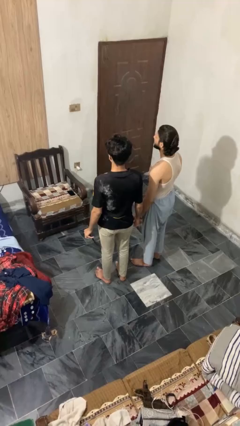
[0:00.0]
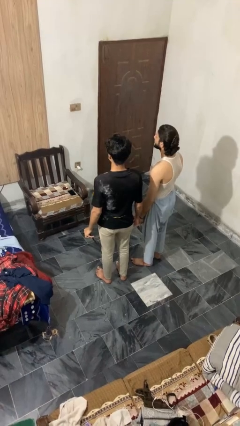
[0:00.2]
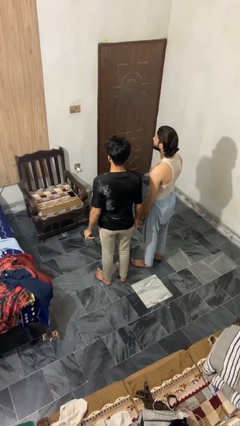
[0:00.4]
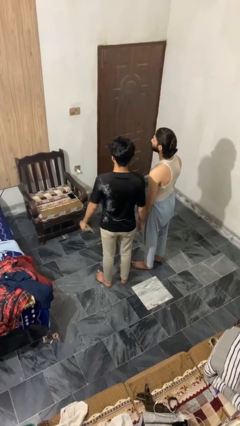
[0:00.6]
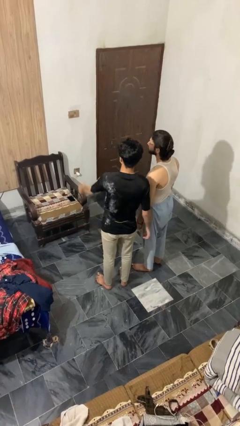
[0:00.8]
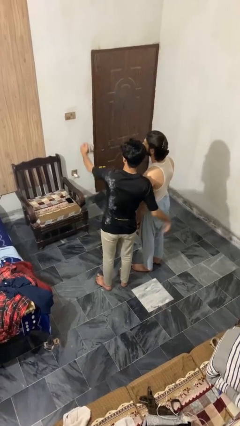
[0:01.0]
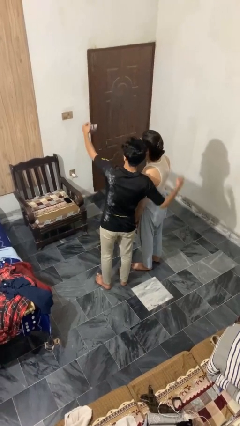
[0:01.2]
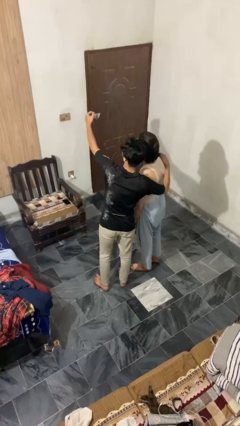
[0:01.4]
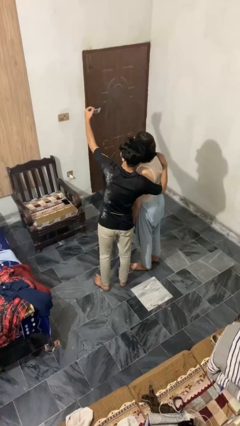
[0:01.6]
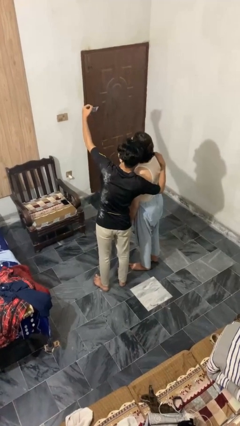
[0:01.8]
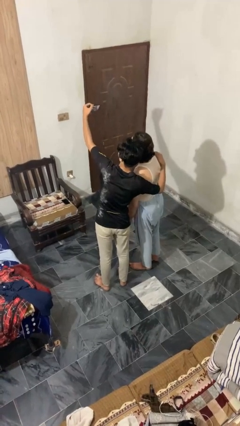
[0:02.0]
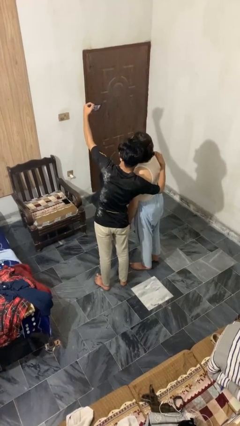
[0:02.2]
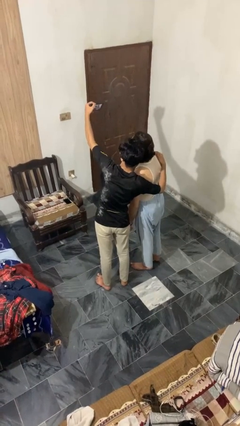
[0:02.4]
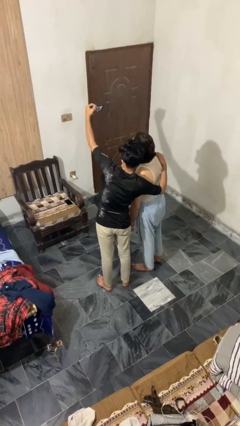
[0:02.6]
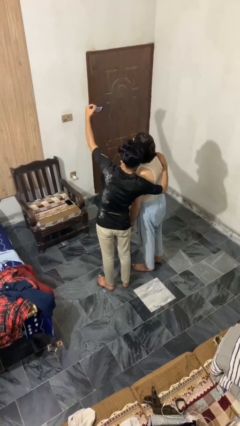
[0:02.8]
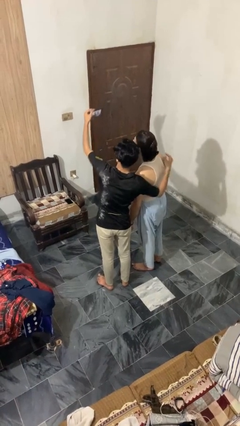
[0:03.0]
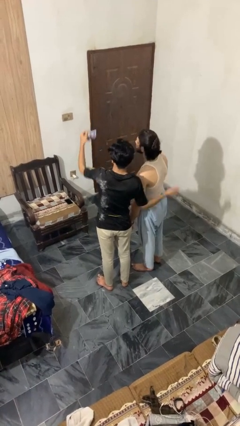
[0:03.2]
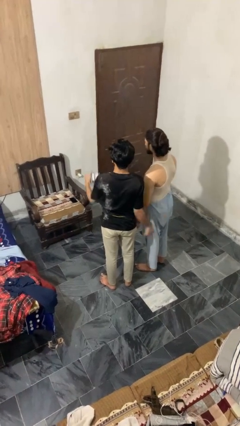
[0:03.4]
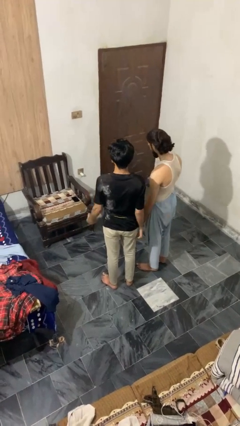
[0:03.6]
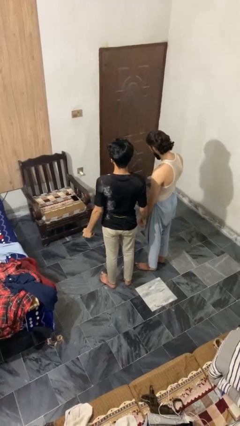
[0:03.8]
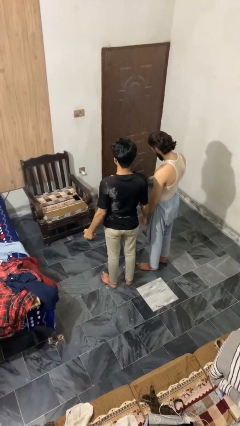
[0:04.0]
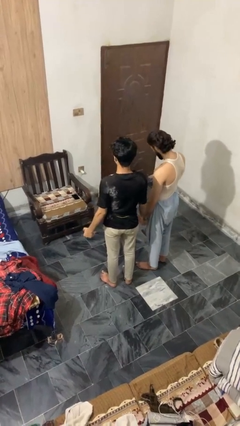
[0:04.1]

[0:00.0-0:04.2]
person takes selfie with person

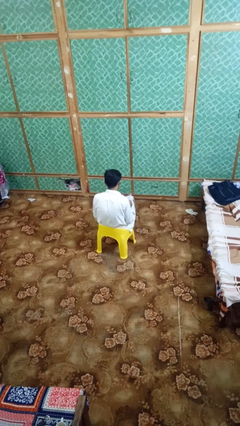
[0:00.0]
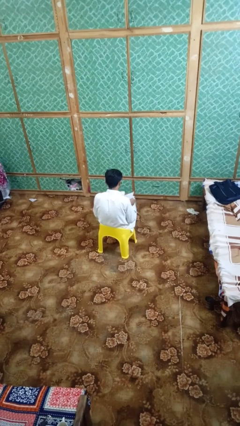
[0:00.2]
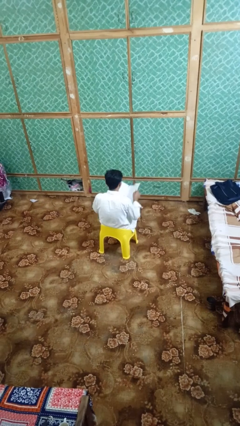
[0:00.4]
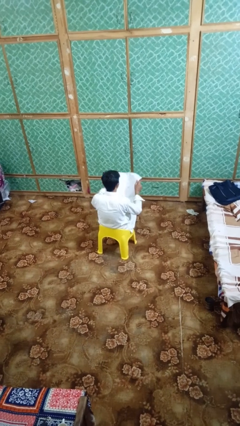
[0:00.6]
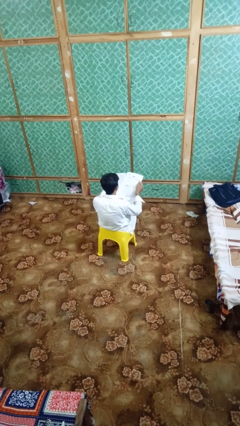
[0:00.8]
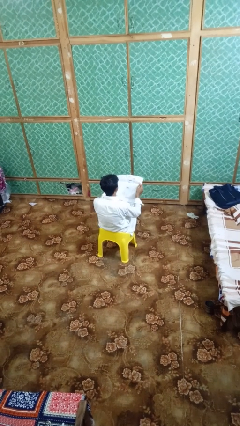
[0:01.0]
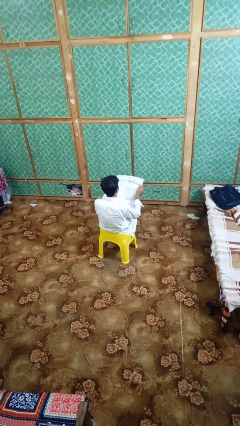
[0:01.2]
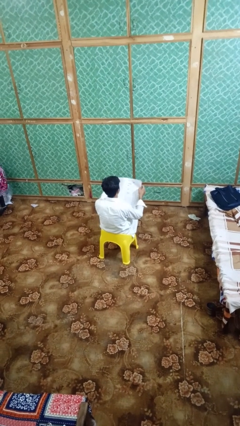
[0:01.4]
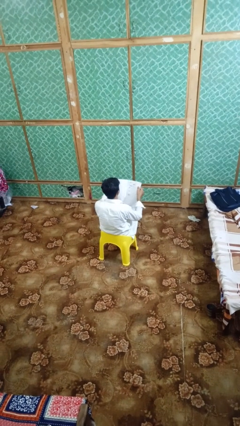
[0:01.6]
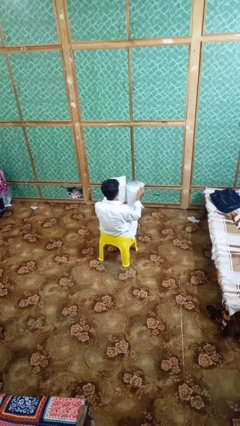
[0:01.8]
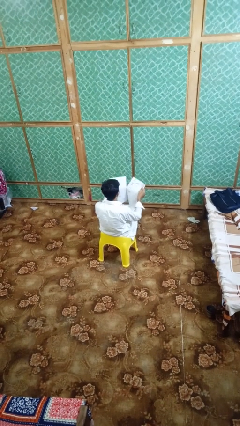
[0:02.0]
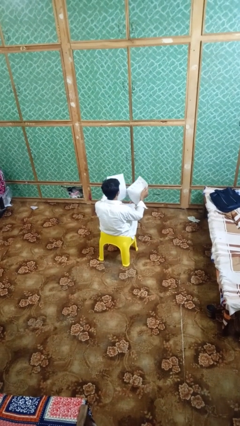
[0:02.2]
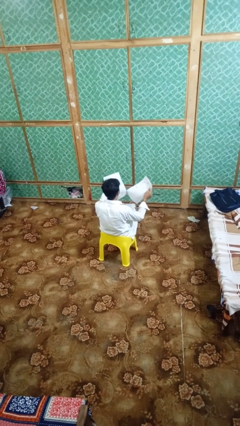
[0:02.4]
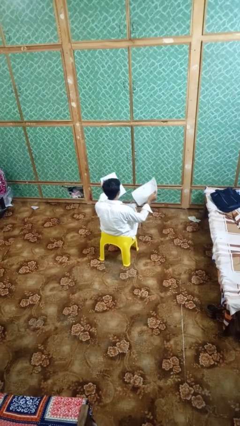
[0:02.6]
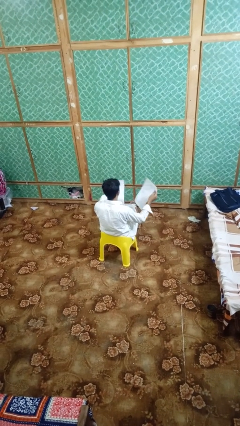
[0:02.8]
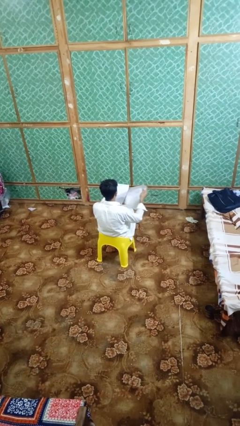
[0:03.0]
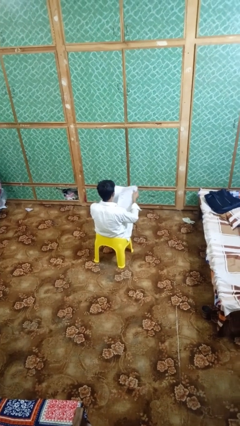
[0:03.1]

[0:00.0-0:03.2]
person tears paper

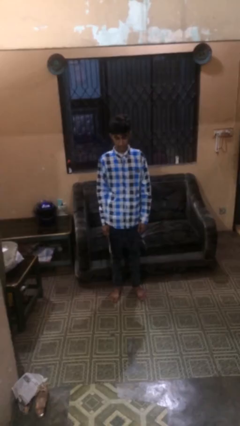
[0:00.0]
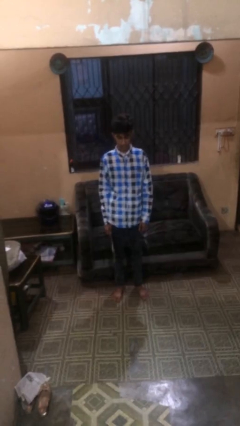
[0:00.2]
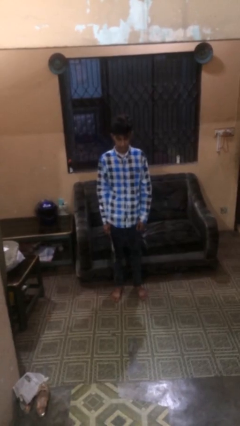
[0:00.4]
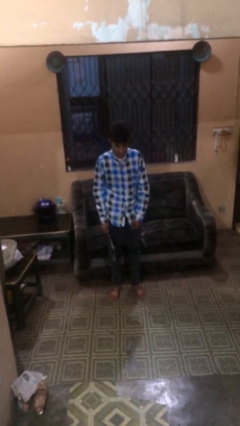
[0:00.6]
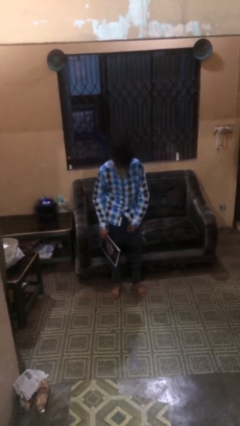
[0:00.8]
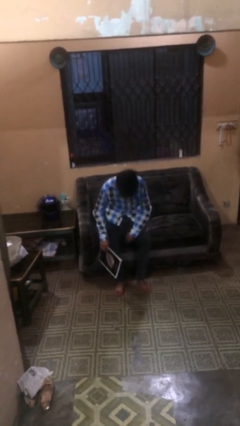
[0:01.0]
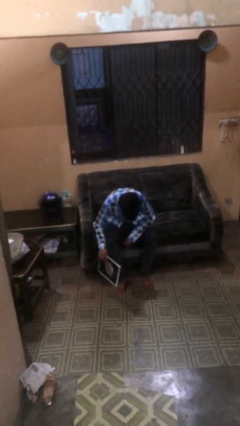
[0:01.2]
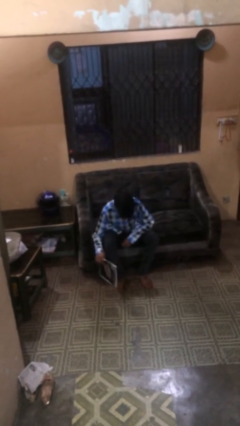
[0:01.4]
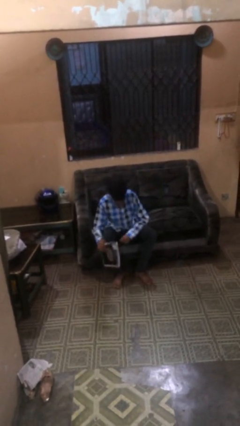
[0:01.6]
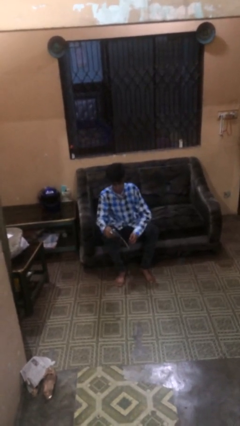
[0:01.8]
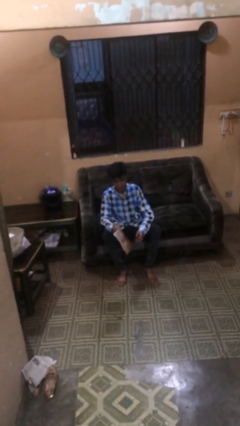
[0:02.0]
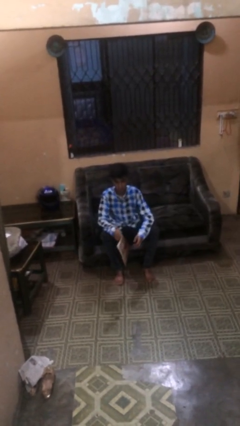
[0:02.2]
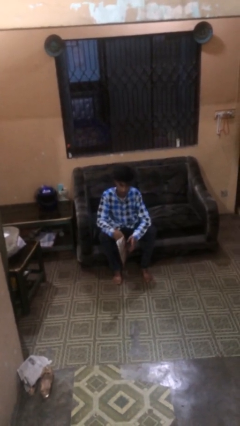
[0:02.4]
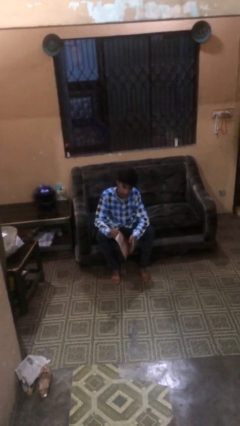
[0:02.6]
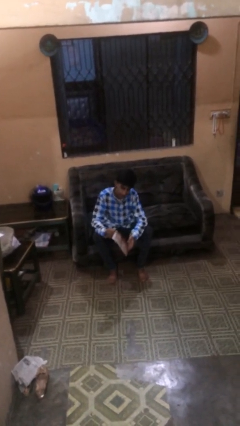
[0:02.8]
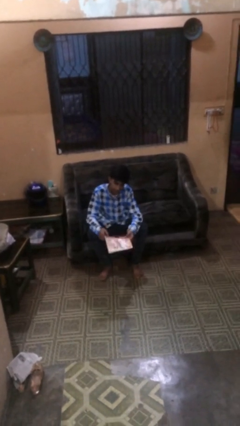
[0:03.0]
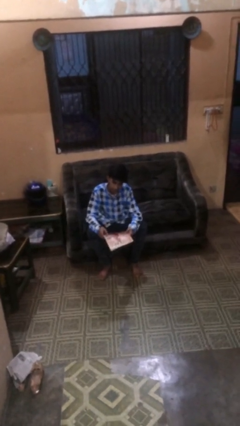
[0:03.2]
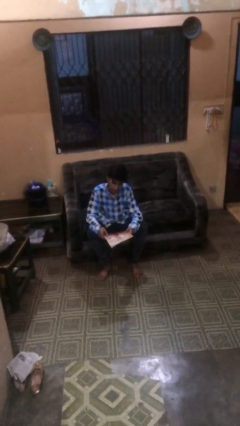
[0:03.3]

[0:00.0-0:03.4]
person sits down

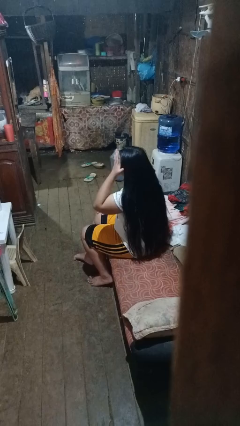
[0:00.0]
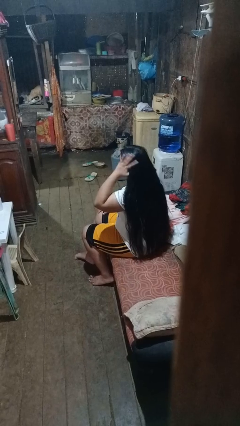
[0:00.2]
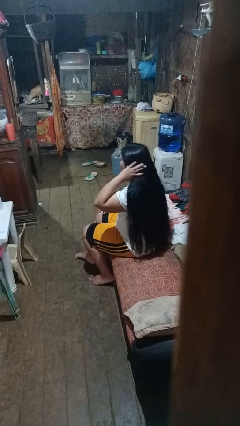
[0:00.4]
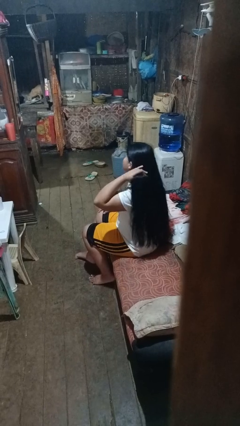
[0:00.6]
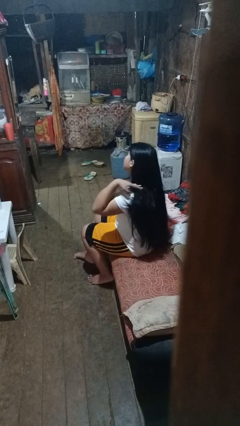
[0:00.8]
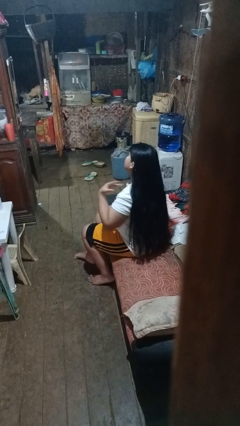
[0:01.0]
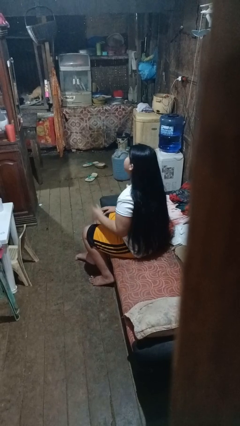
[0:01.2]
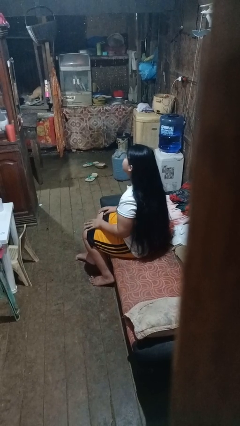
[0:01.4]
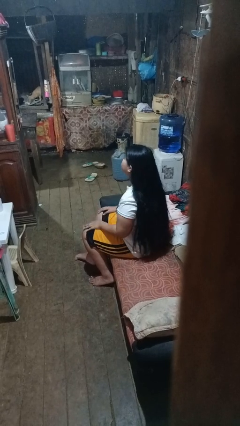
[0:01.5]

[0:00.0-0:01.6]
person strokes hair

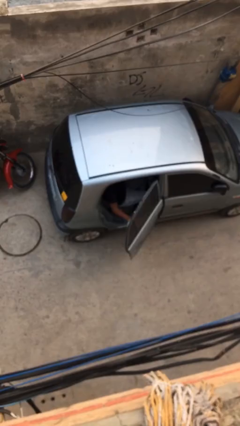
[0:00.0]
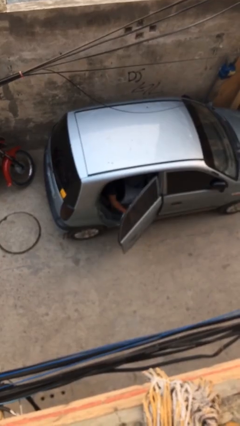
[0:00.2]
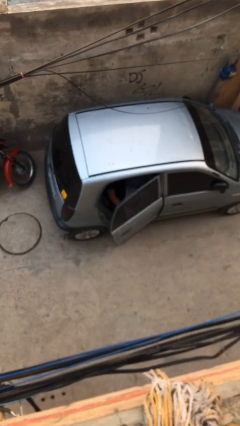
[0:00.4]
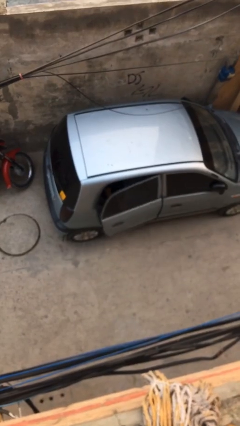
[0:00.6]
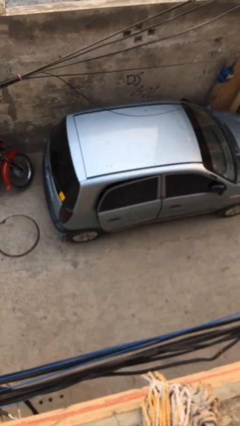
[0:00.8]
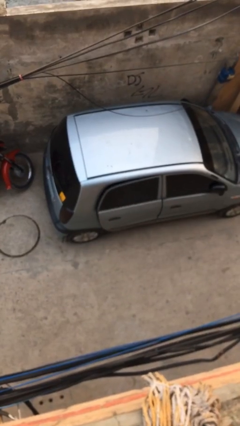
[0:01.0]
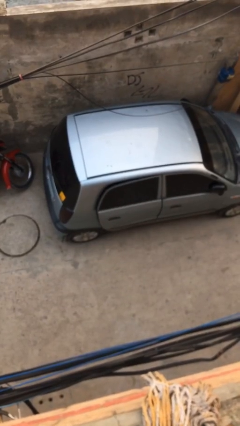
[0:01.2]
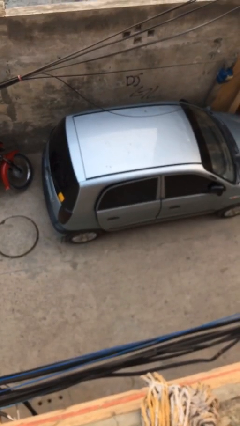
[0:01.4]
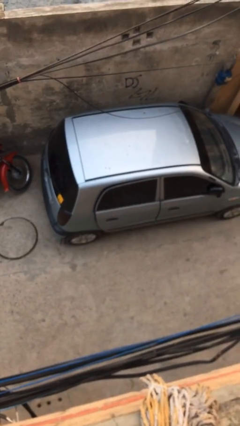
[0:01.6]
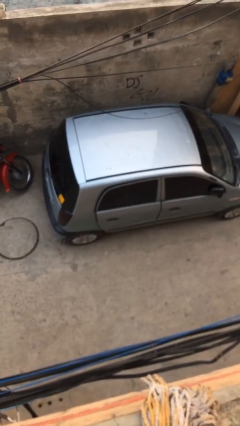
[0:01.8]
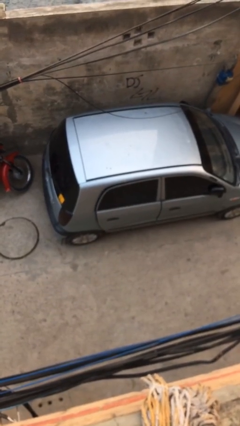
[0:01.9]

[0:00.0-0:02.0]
person closes car door

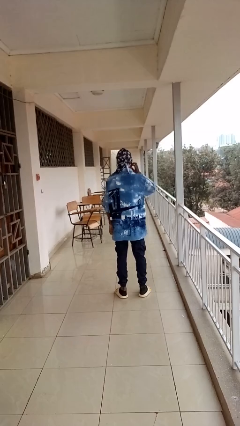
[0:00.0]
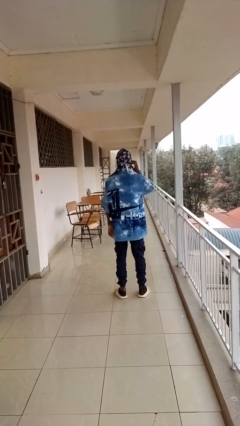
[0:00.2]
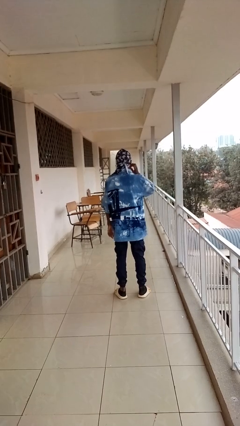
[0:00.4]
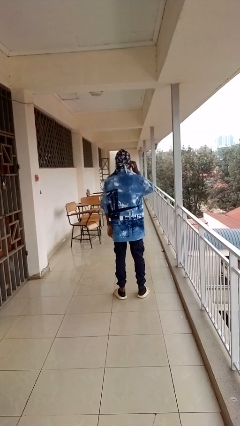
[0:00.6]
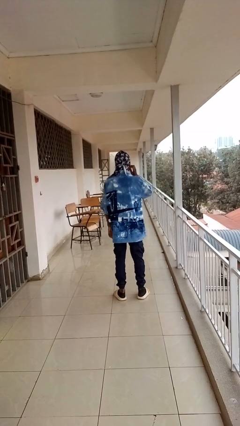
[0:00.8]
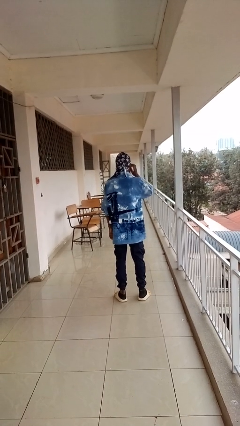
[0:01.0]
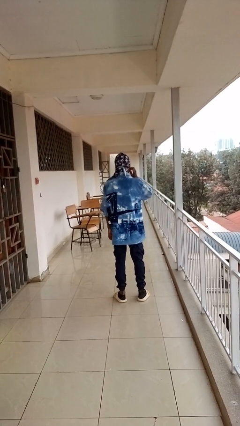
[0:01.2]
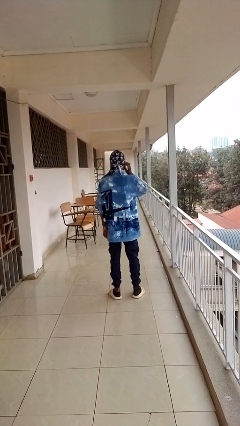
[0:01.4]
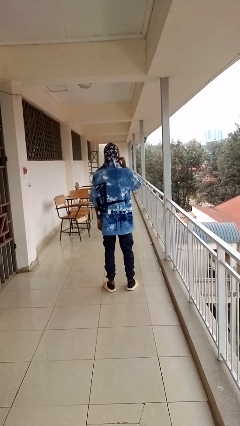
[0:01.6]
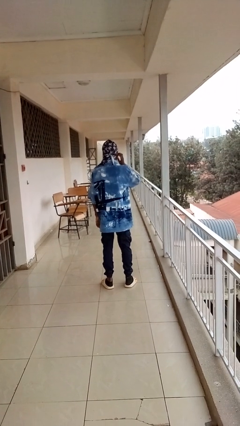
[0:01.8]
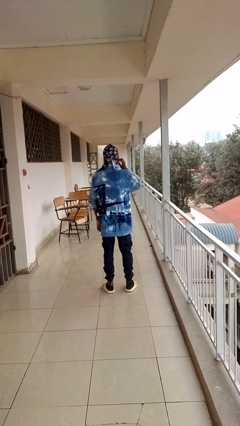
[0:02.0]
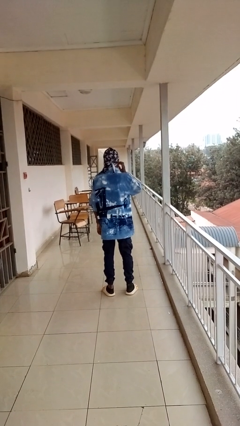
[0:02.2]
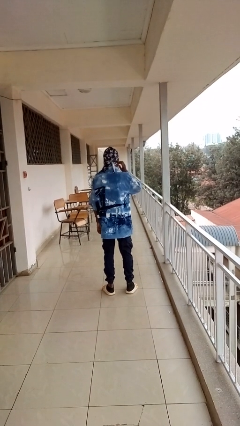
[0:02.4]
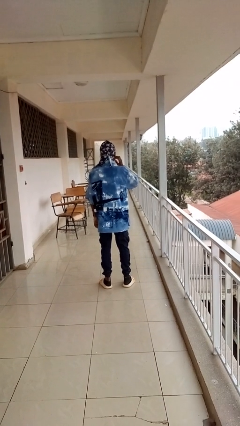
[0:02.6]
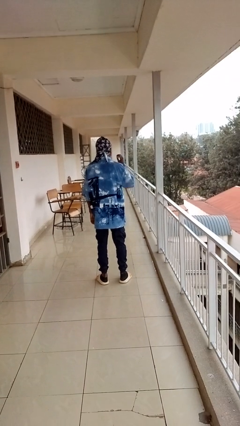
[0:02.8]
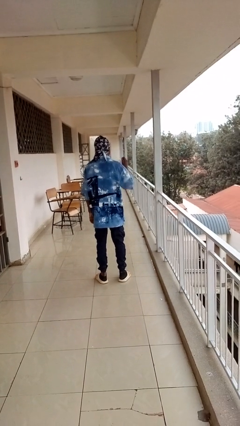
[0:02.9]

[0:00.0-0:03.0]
person scratches face

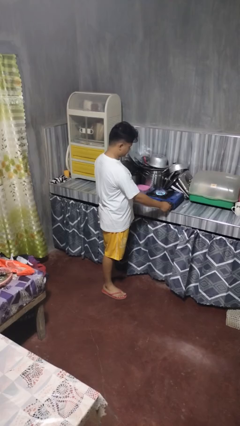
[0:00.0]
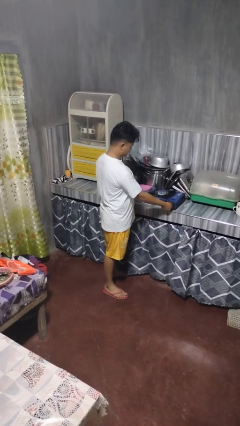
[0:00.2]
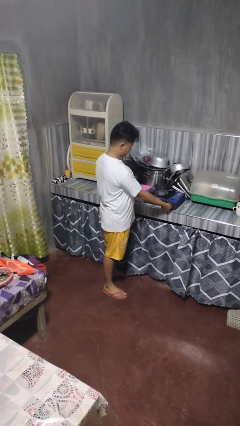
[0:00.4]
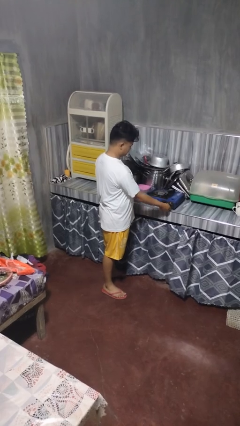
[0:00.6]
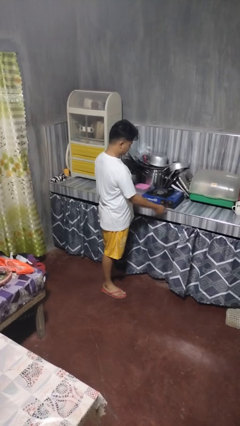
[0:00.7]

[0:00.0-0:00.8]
person turns off stovetop
